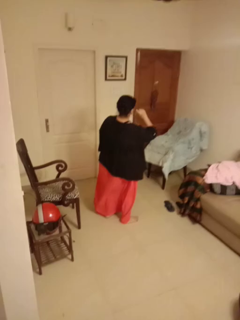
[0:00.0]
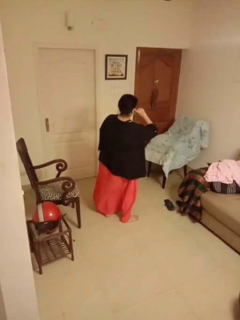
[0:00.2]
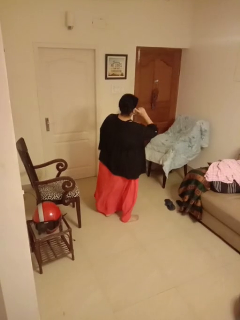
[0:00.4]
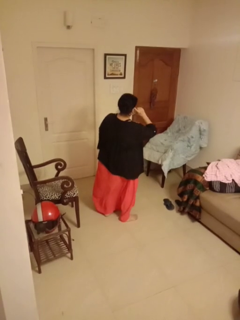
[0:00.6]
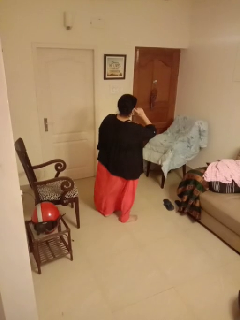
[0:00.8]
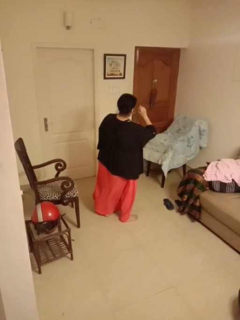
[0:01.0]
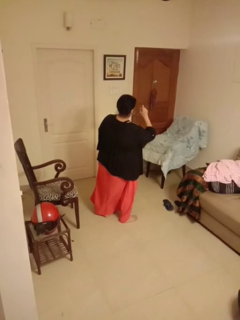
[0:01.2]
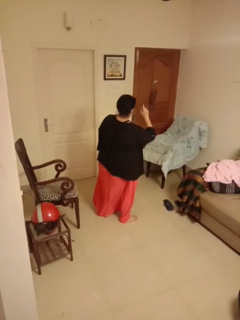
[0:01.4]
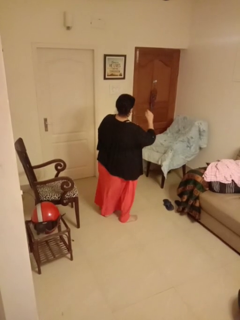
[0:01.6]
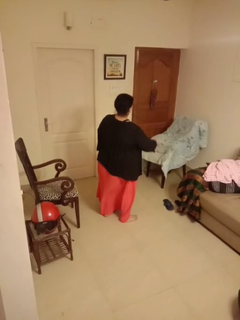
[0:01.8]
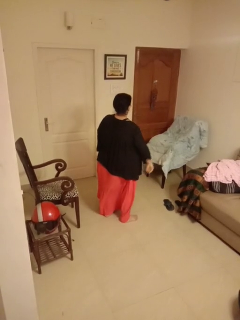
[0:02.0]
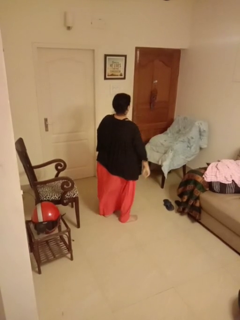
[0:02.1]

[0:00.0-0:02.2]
person gestures listen closely

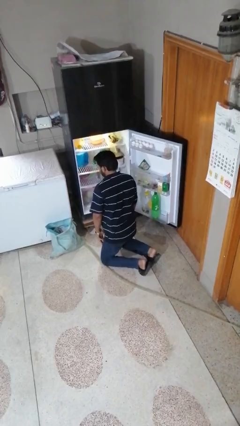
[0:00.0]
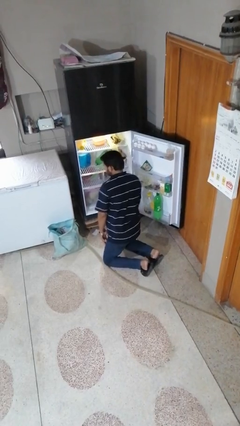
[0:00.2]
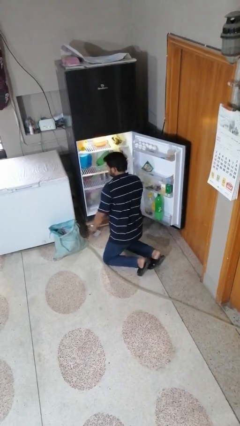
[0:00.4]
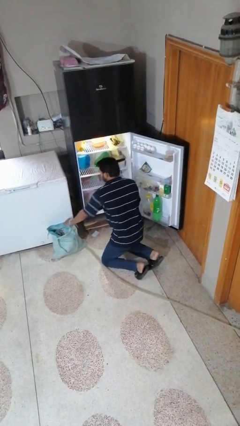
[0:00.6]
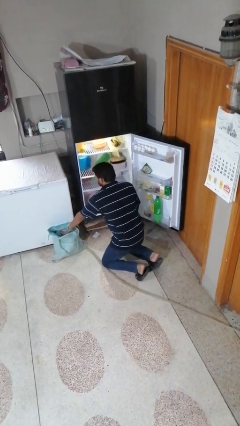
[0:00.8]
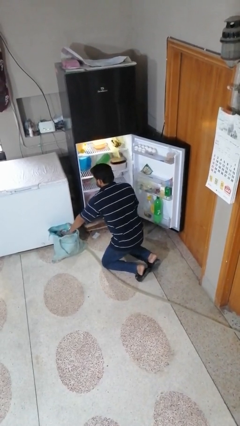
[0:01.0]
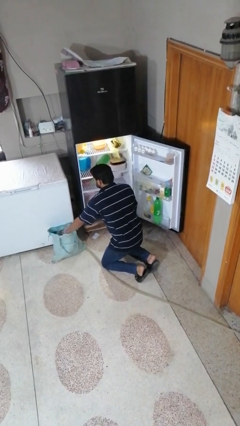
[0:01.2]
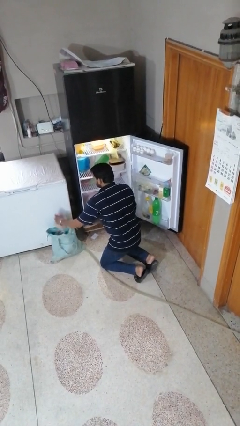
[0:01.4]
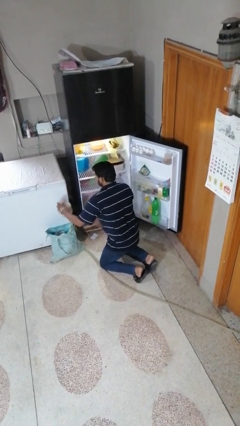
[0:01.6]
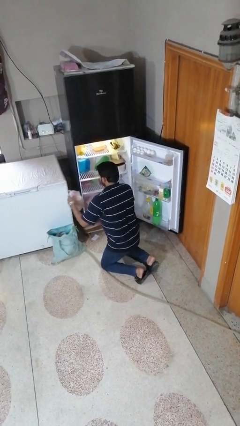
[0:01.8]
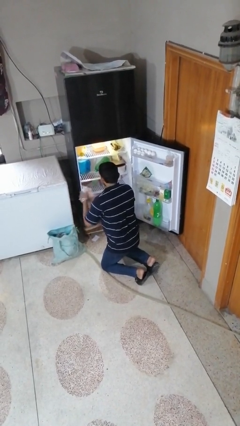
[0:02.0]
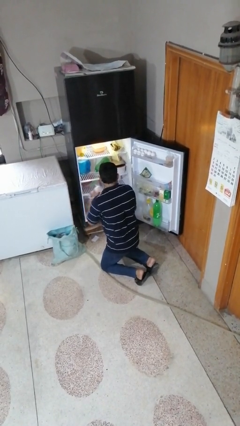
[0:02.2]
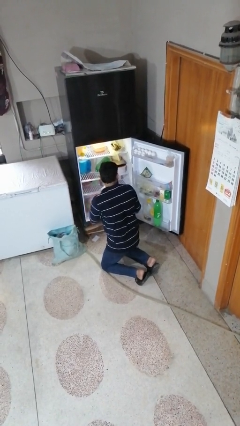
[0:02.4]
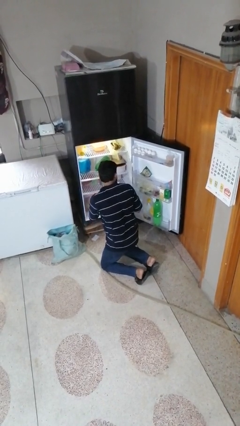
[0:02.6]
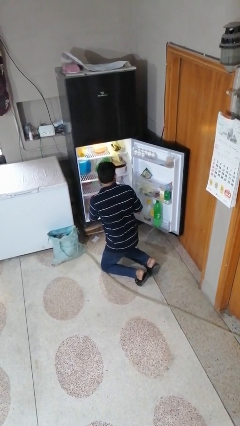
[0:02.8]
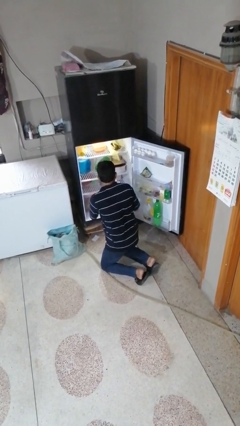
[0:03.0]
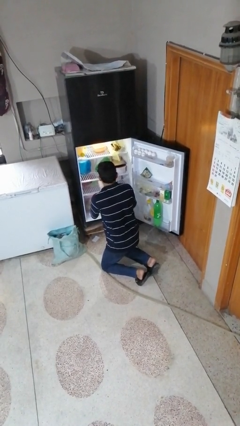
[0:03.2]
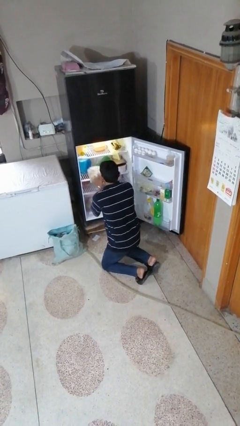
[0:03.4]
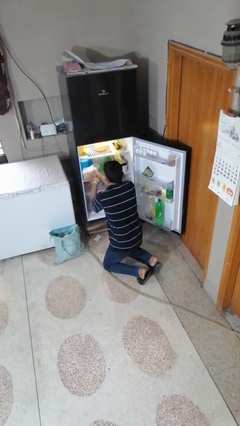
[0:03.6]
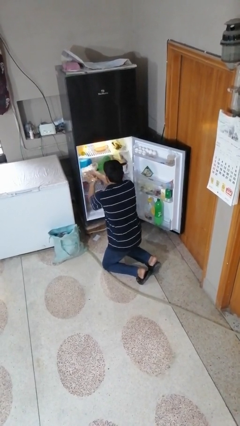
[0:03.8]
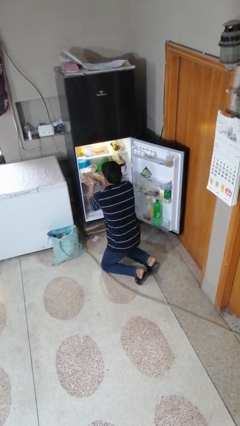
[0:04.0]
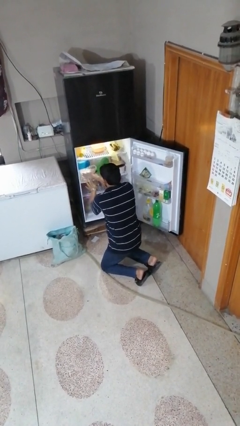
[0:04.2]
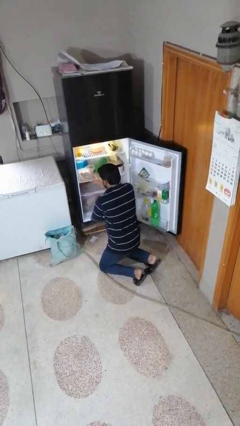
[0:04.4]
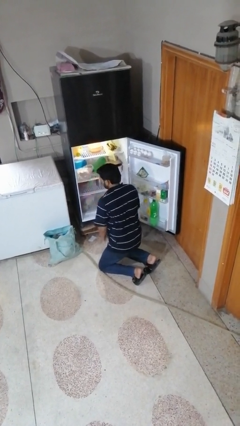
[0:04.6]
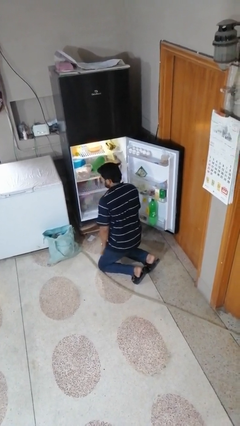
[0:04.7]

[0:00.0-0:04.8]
person loads groceries into refrigerator

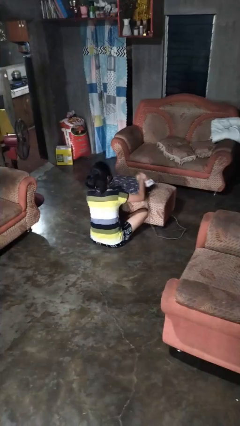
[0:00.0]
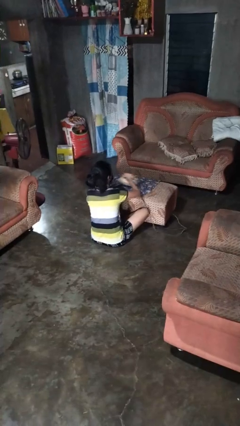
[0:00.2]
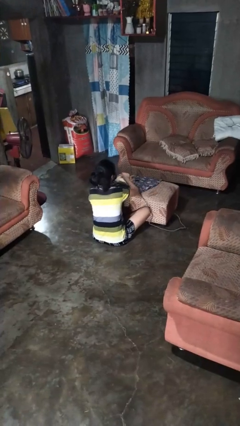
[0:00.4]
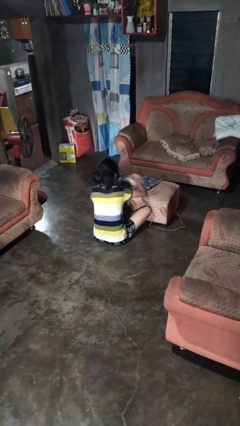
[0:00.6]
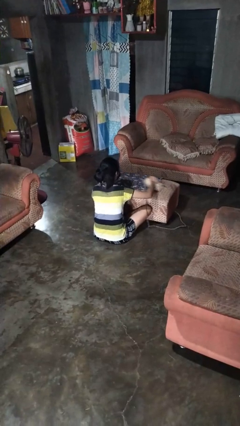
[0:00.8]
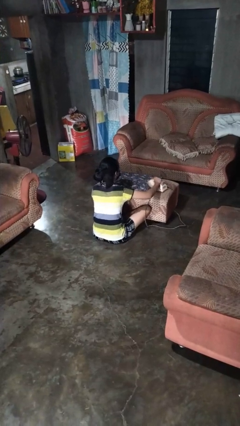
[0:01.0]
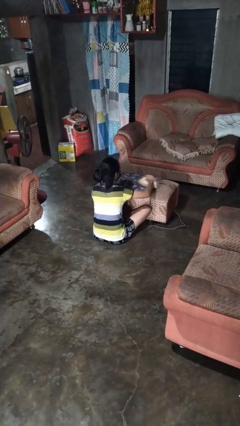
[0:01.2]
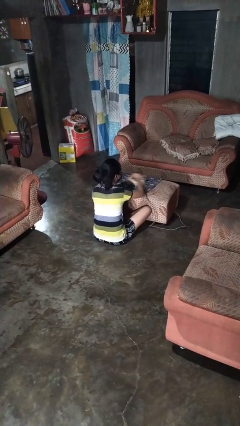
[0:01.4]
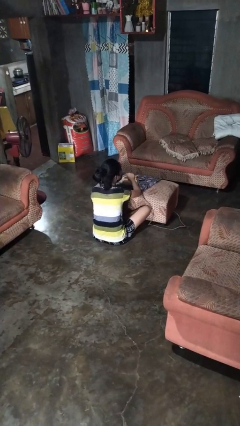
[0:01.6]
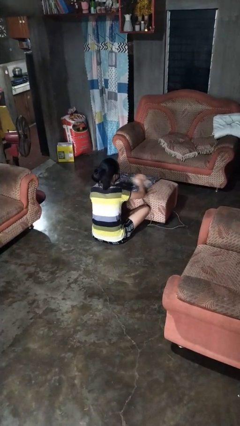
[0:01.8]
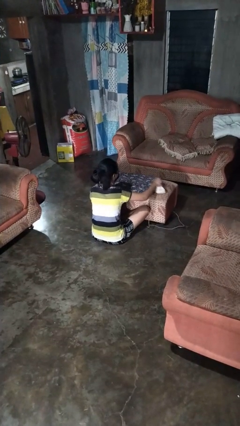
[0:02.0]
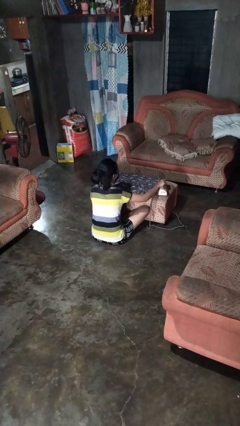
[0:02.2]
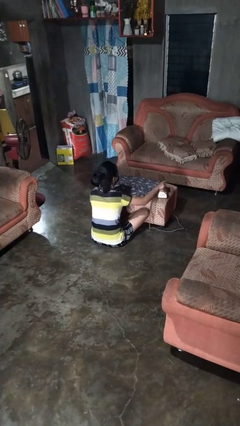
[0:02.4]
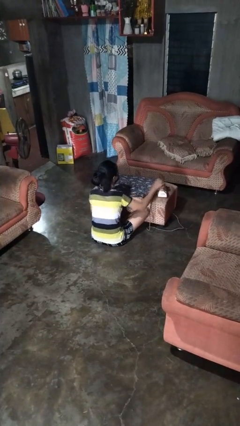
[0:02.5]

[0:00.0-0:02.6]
person irons clothes

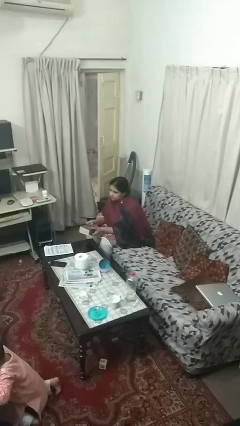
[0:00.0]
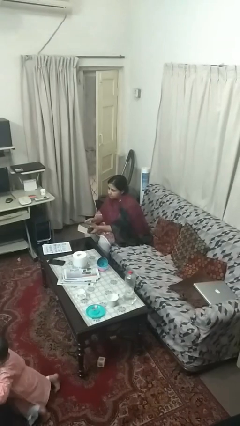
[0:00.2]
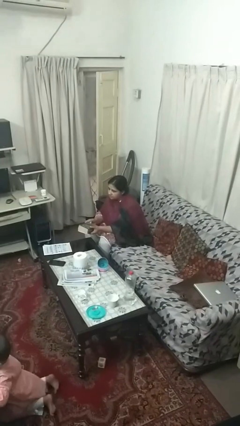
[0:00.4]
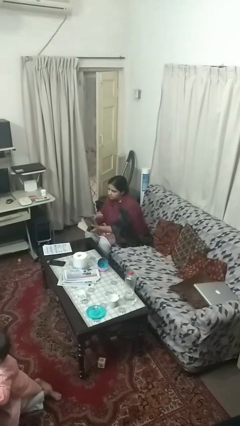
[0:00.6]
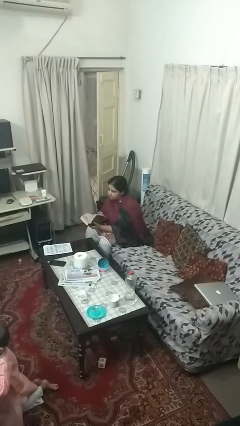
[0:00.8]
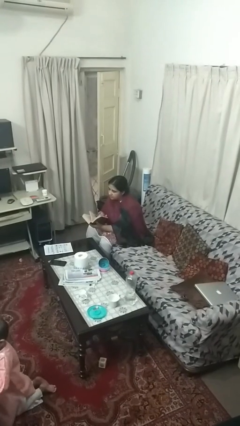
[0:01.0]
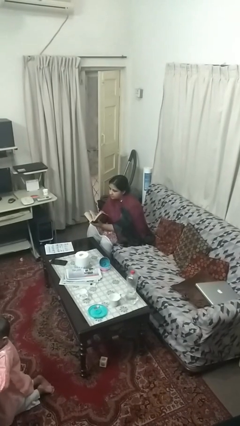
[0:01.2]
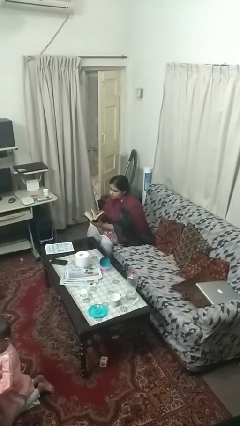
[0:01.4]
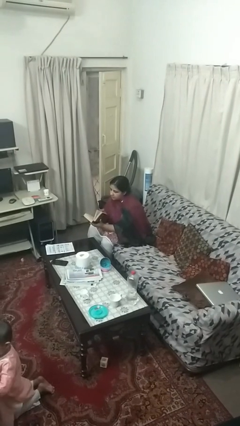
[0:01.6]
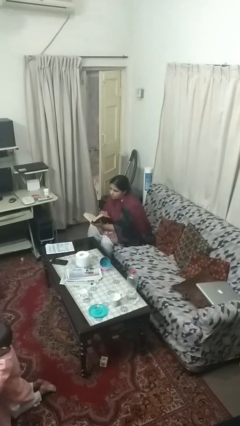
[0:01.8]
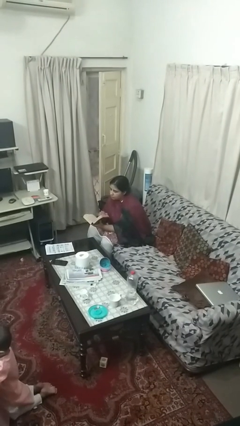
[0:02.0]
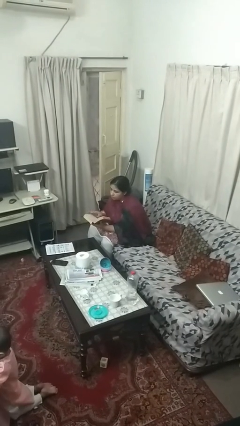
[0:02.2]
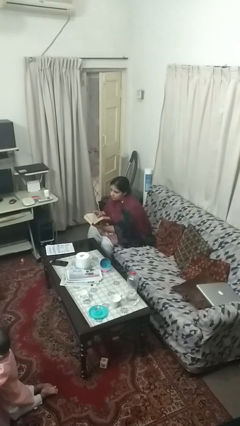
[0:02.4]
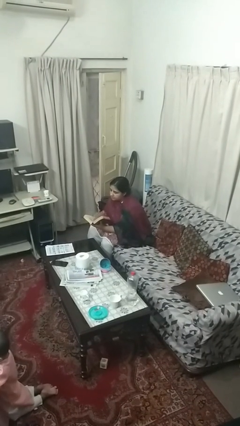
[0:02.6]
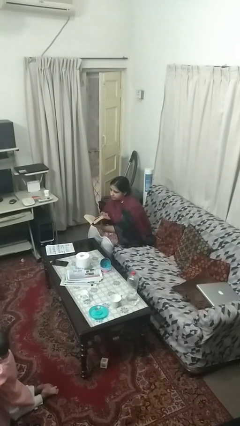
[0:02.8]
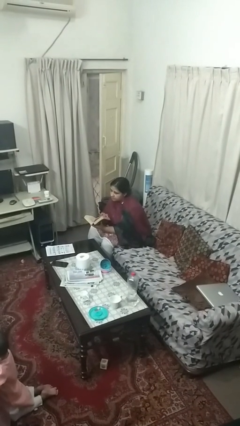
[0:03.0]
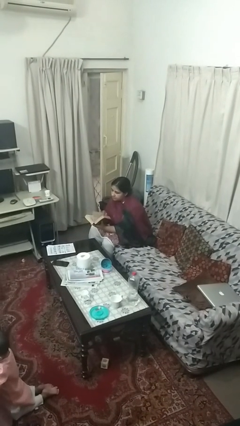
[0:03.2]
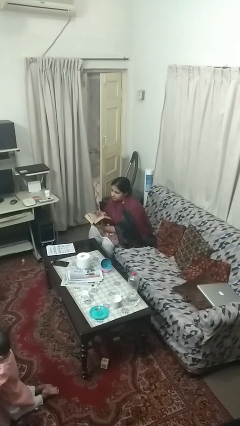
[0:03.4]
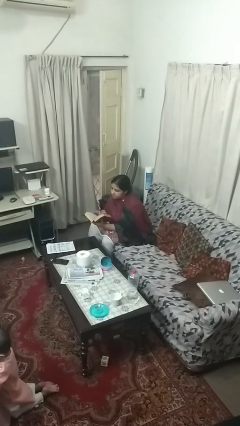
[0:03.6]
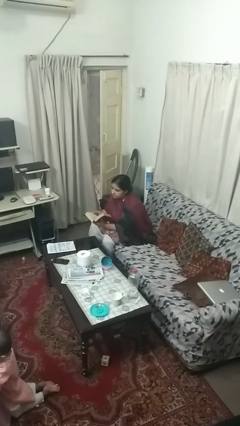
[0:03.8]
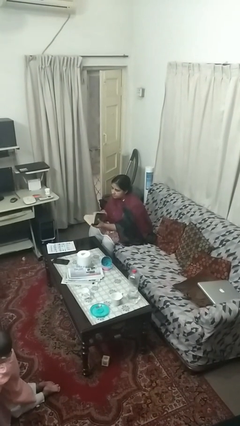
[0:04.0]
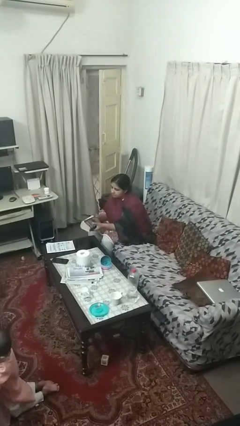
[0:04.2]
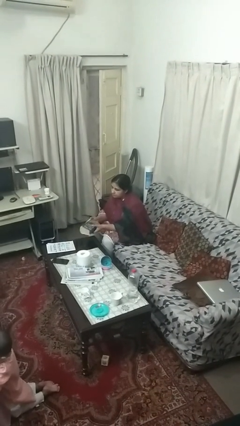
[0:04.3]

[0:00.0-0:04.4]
person reads book

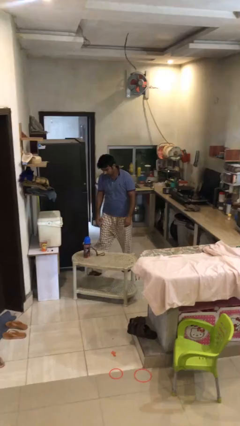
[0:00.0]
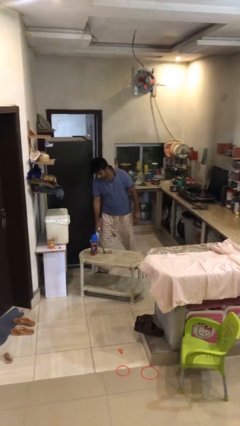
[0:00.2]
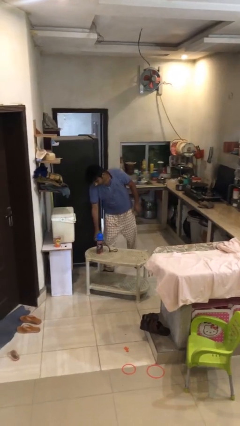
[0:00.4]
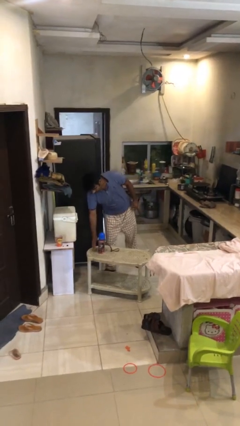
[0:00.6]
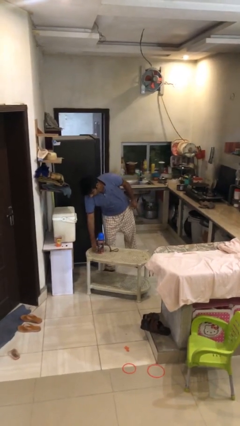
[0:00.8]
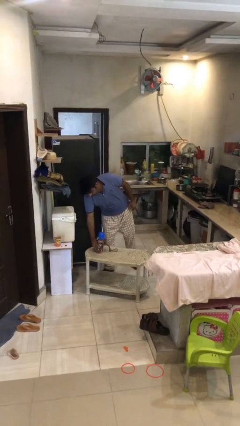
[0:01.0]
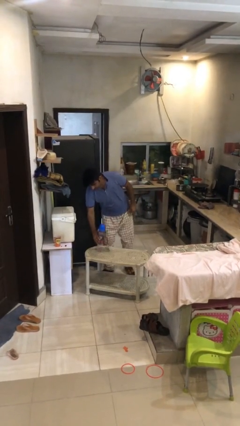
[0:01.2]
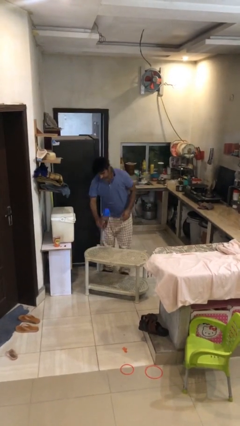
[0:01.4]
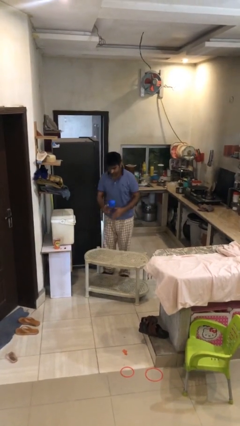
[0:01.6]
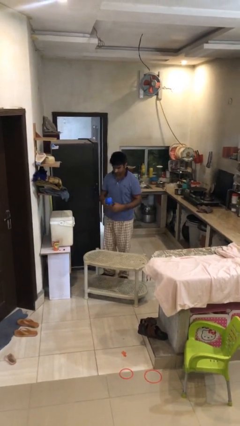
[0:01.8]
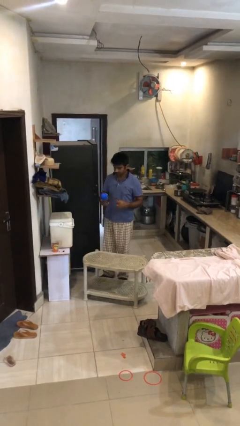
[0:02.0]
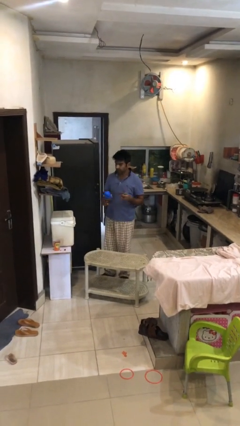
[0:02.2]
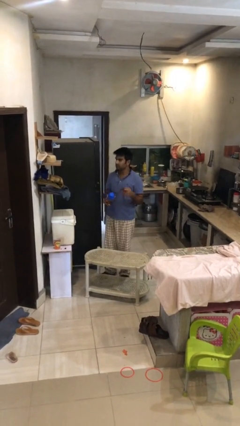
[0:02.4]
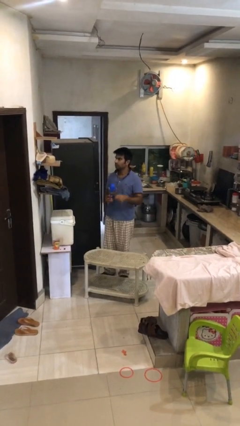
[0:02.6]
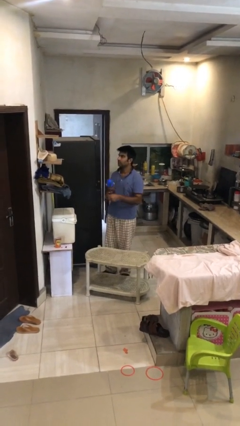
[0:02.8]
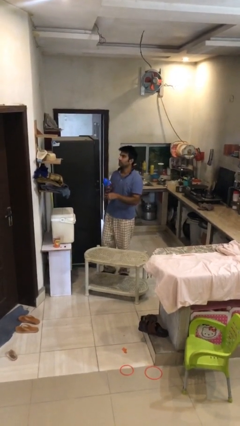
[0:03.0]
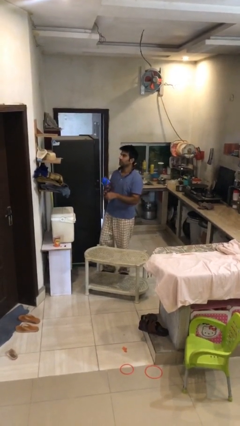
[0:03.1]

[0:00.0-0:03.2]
person picks up object from table

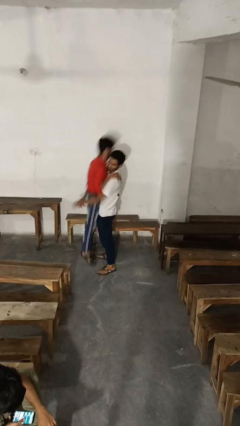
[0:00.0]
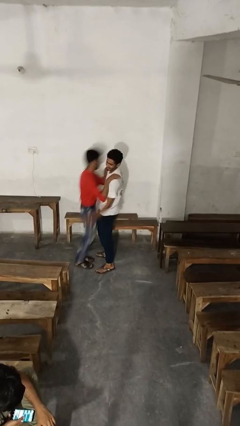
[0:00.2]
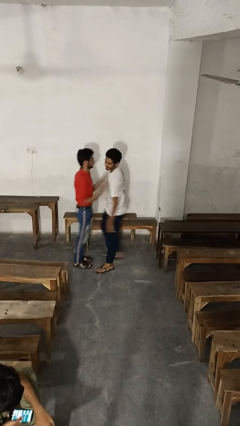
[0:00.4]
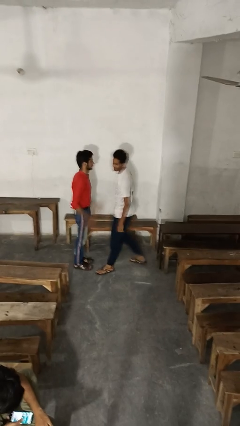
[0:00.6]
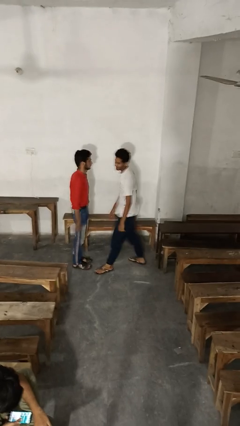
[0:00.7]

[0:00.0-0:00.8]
person puts down person
